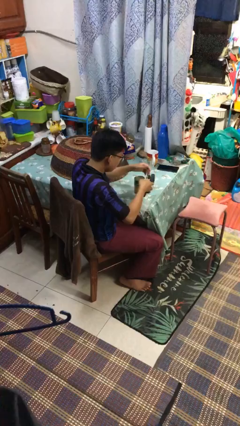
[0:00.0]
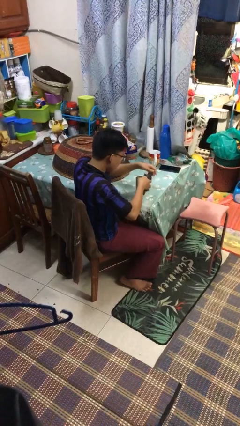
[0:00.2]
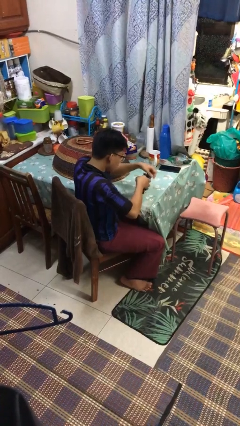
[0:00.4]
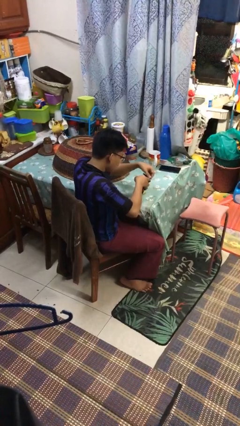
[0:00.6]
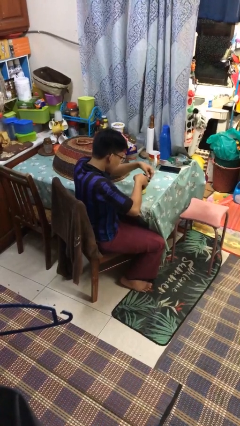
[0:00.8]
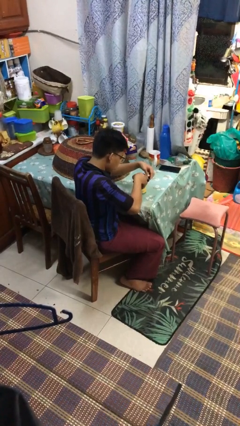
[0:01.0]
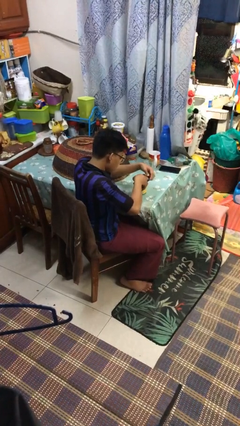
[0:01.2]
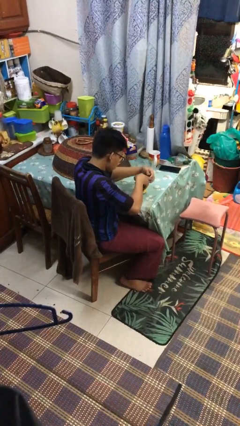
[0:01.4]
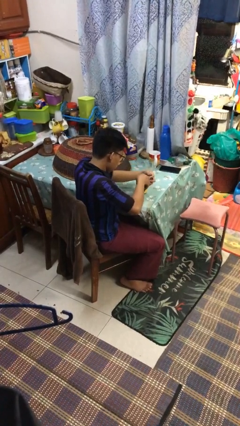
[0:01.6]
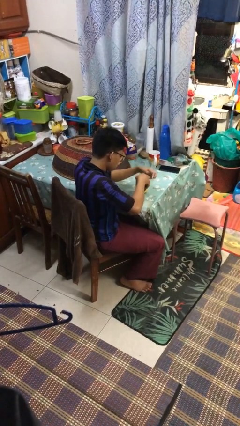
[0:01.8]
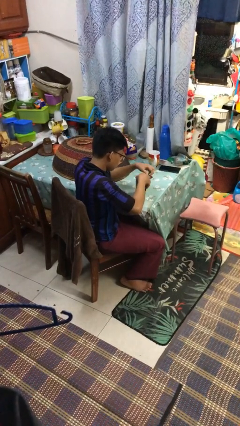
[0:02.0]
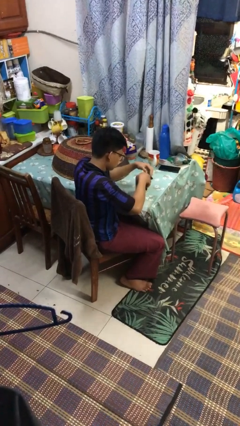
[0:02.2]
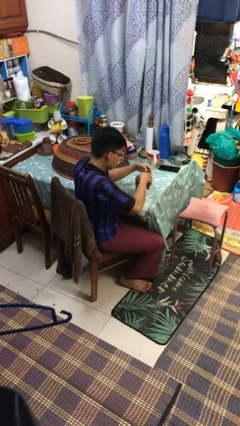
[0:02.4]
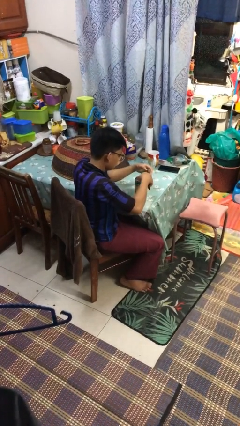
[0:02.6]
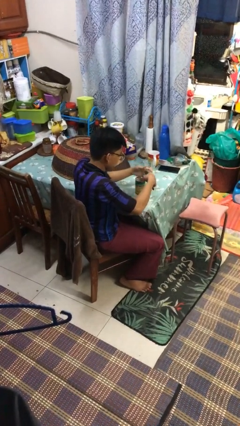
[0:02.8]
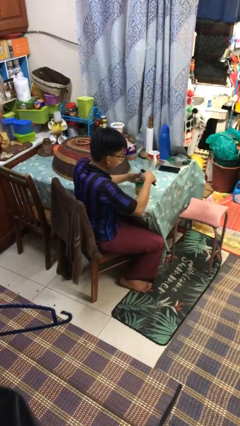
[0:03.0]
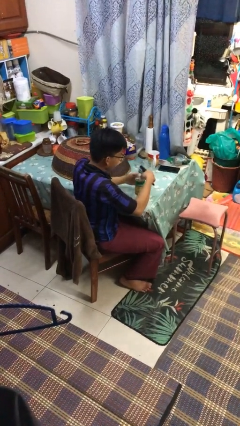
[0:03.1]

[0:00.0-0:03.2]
person opens can with can opener

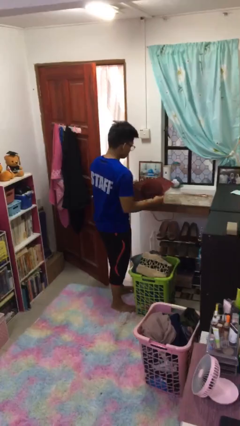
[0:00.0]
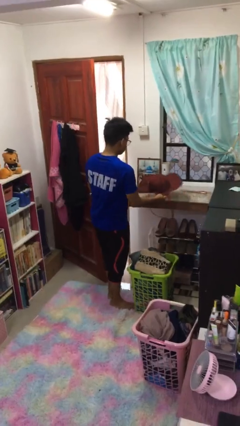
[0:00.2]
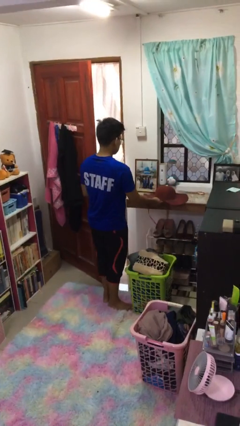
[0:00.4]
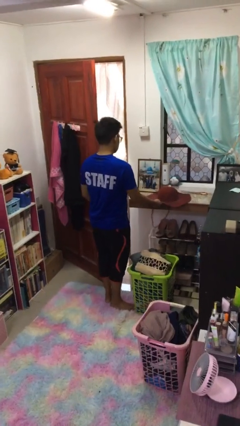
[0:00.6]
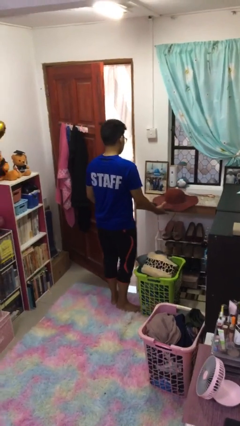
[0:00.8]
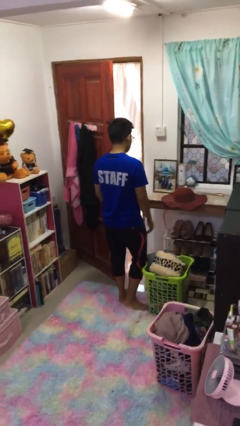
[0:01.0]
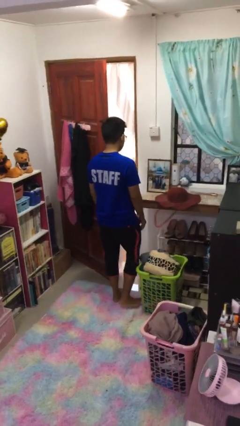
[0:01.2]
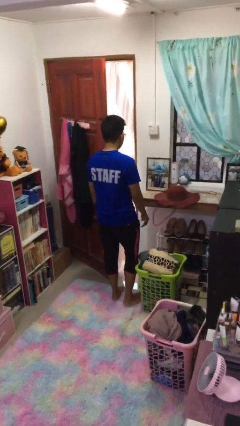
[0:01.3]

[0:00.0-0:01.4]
person puts down object on countertop

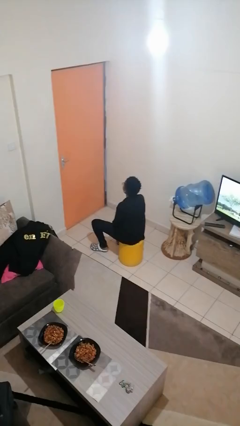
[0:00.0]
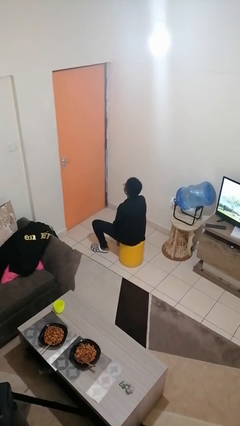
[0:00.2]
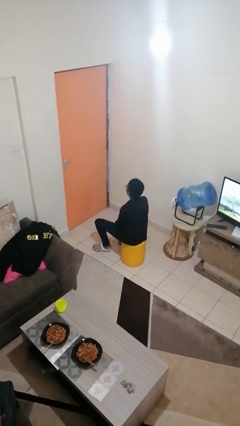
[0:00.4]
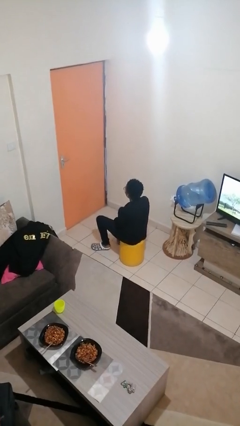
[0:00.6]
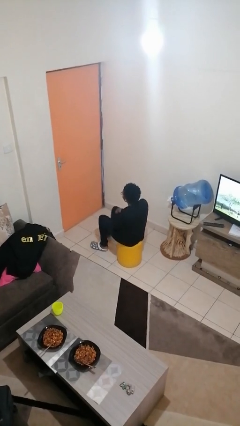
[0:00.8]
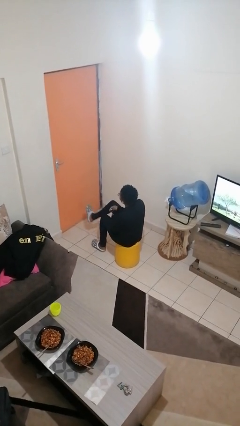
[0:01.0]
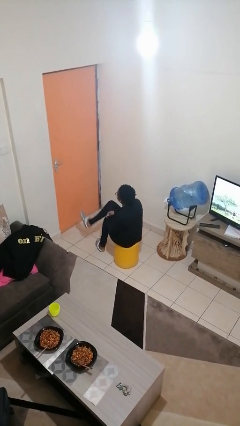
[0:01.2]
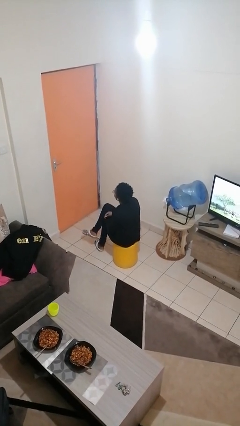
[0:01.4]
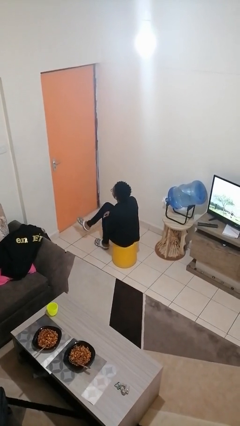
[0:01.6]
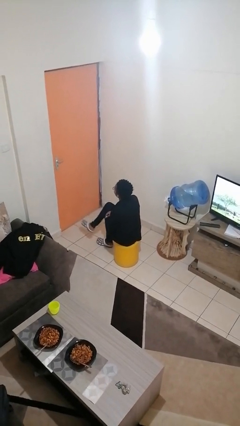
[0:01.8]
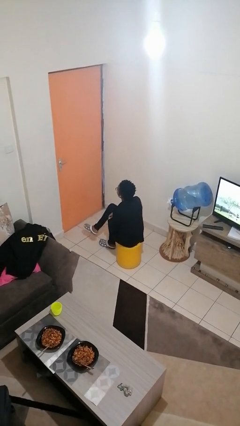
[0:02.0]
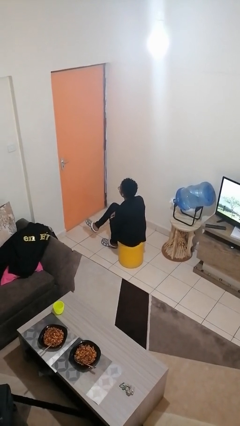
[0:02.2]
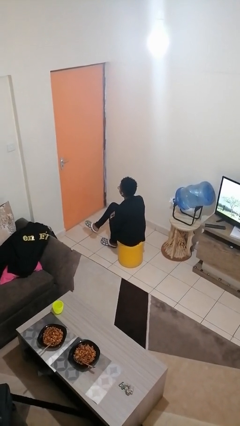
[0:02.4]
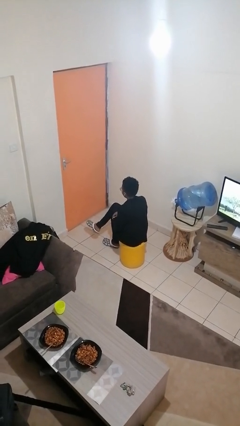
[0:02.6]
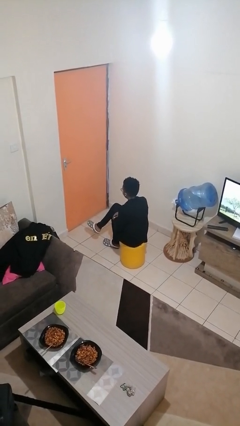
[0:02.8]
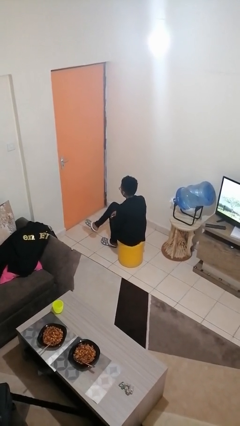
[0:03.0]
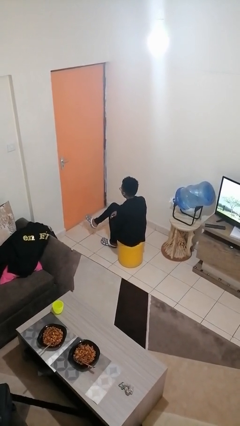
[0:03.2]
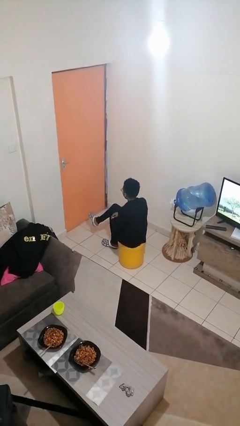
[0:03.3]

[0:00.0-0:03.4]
person crosses legs

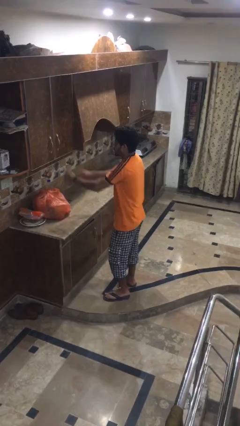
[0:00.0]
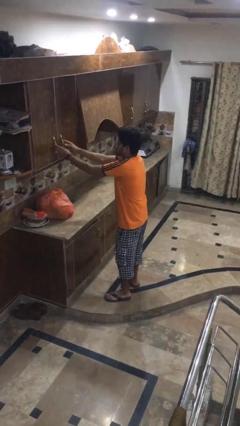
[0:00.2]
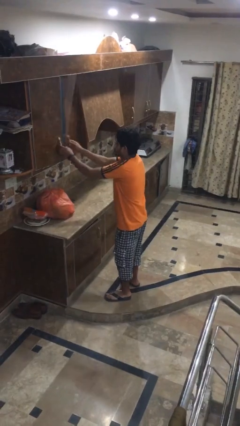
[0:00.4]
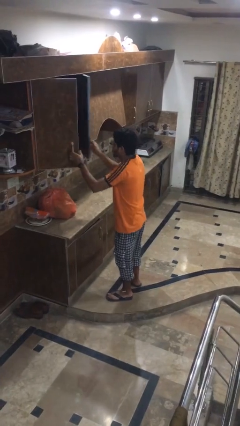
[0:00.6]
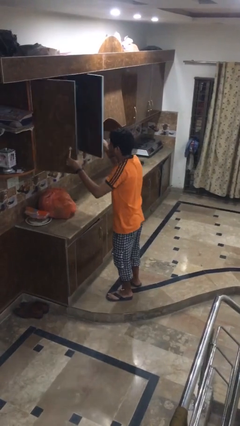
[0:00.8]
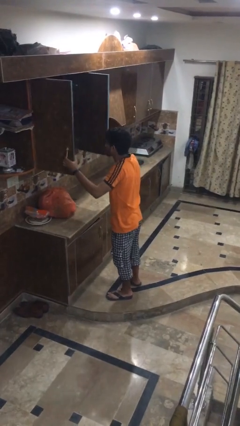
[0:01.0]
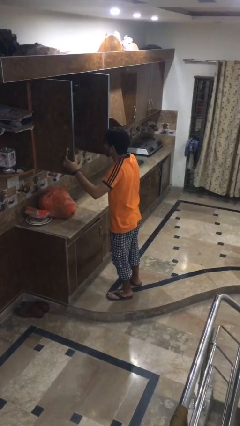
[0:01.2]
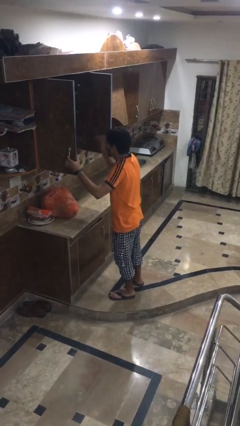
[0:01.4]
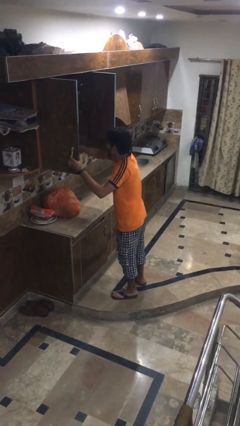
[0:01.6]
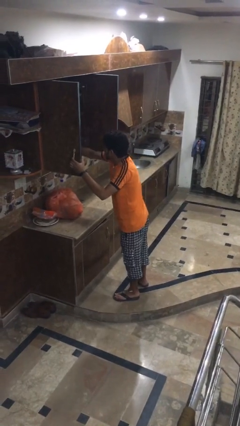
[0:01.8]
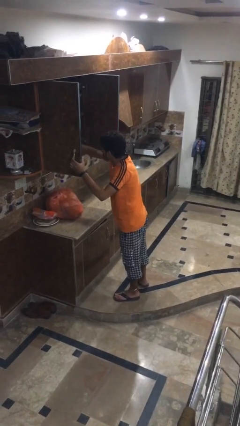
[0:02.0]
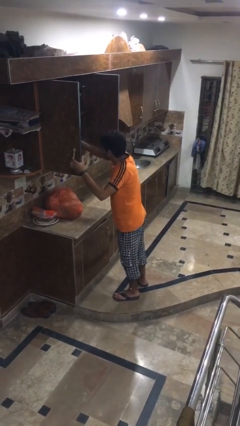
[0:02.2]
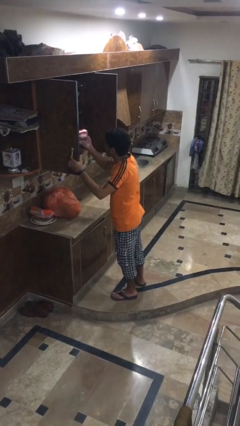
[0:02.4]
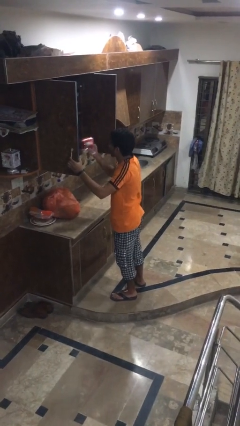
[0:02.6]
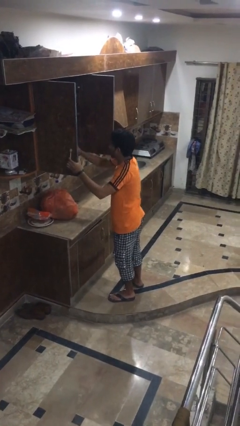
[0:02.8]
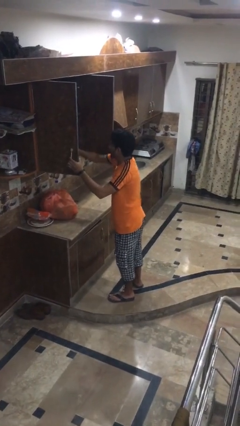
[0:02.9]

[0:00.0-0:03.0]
person searches in kitchen drawer

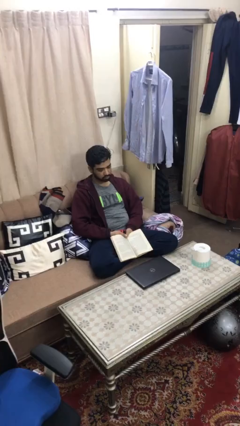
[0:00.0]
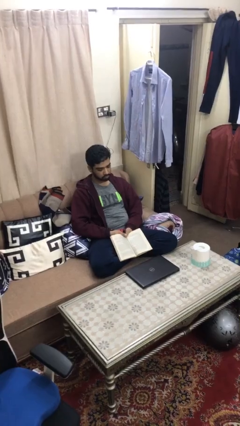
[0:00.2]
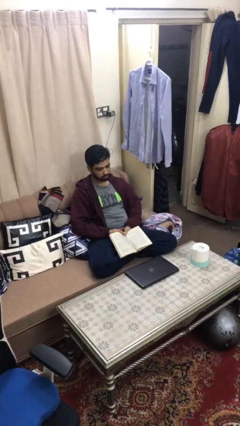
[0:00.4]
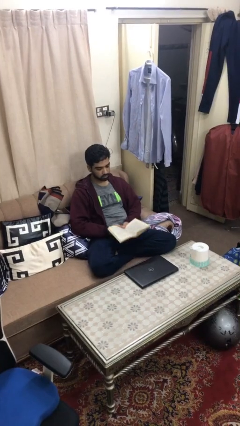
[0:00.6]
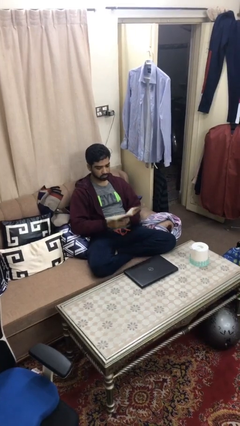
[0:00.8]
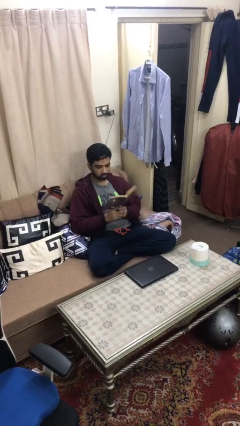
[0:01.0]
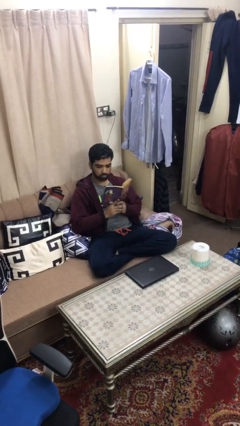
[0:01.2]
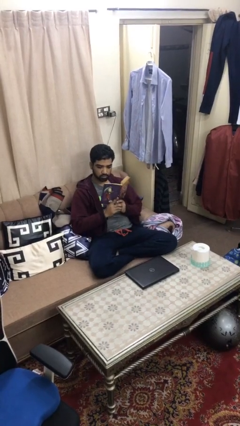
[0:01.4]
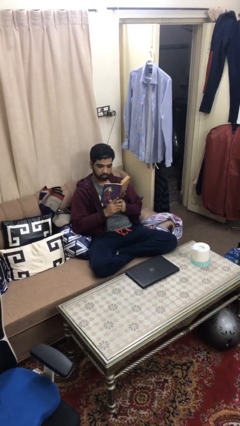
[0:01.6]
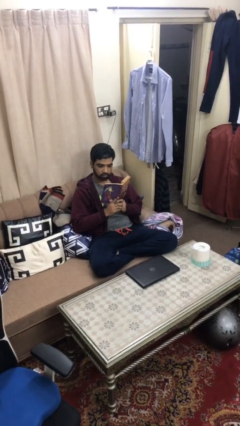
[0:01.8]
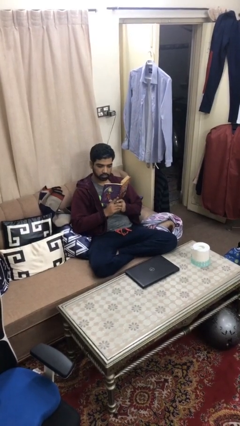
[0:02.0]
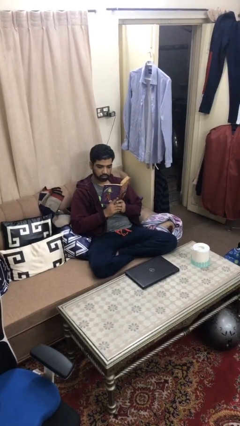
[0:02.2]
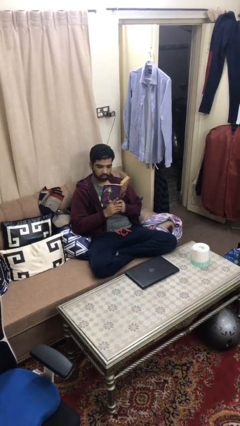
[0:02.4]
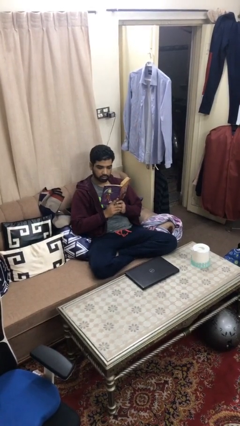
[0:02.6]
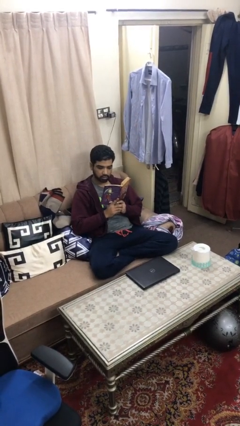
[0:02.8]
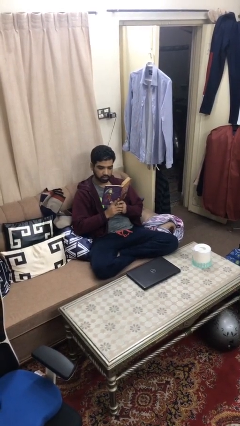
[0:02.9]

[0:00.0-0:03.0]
person reads document

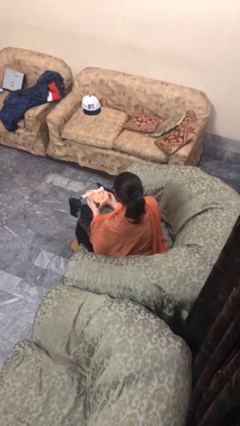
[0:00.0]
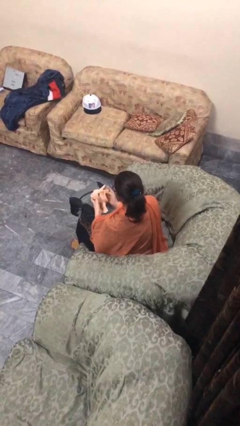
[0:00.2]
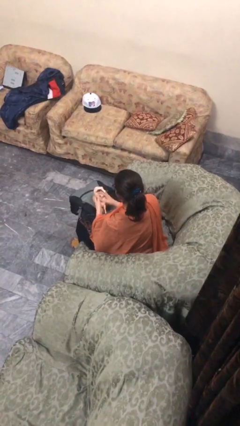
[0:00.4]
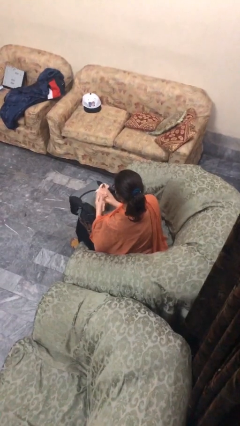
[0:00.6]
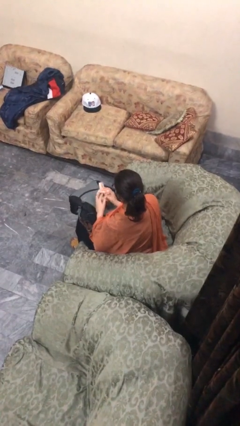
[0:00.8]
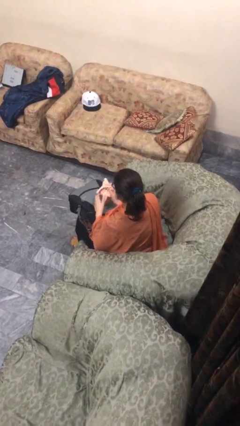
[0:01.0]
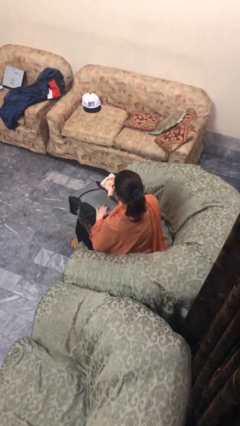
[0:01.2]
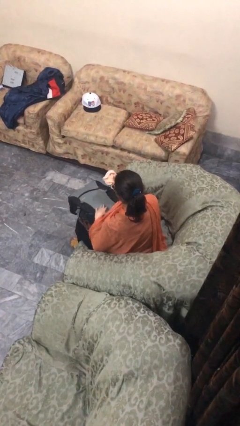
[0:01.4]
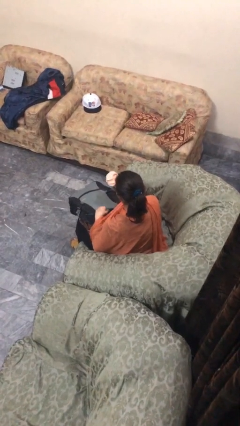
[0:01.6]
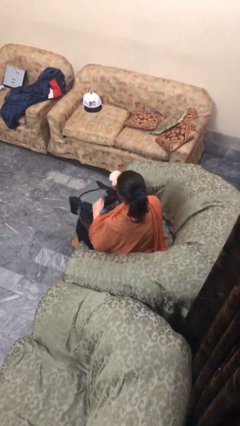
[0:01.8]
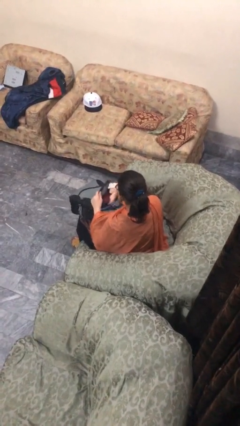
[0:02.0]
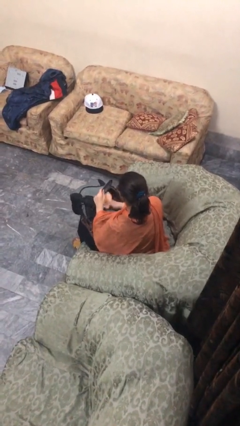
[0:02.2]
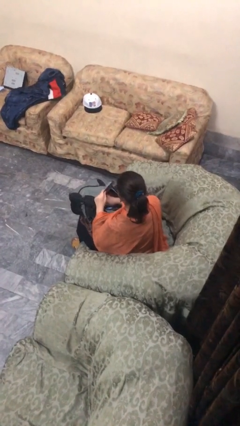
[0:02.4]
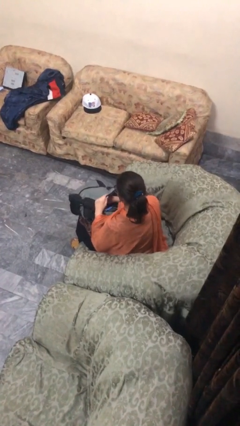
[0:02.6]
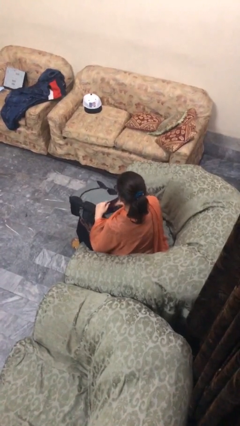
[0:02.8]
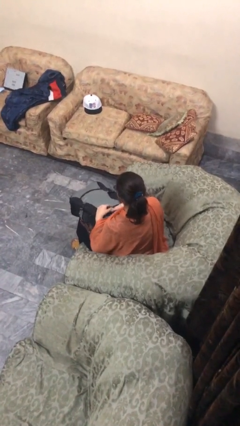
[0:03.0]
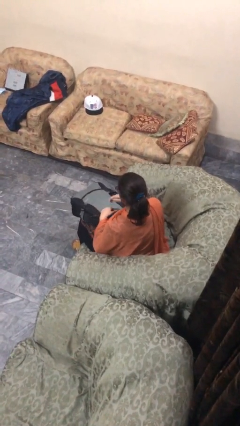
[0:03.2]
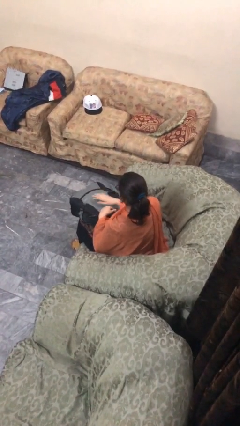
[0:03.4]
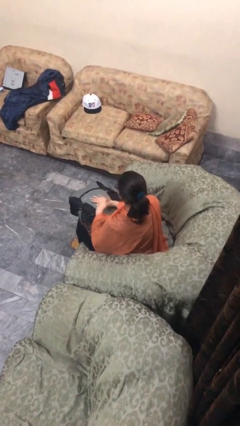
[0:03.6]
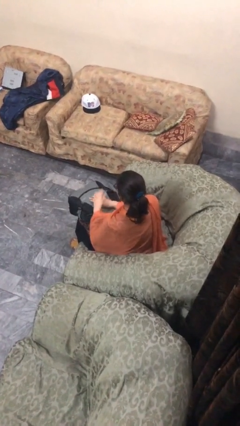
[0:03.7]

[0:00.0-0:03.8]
person puts object into backpack
